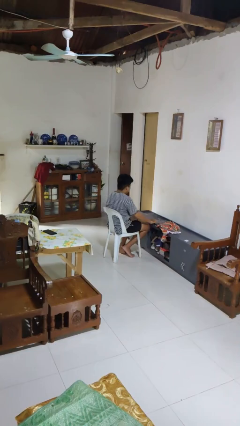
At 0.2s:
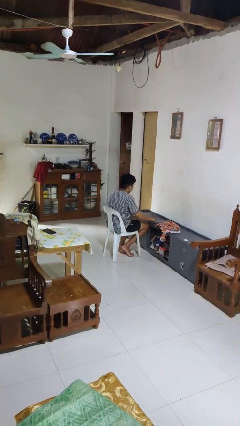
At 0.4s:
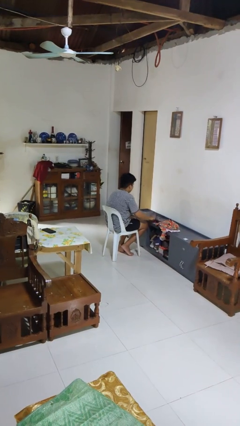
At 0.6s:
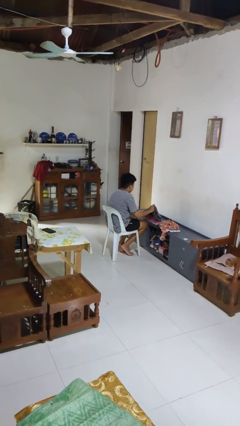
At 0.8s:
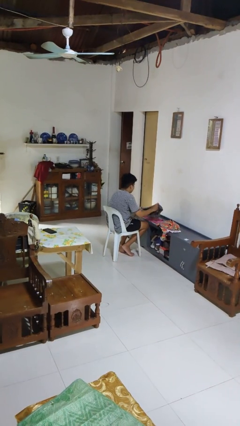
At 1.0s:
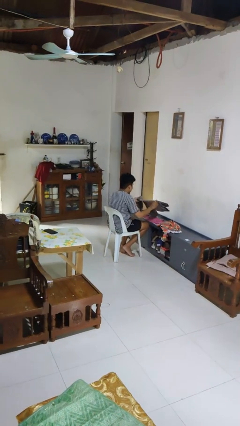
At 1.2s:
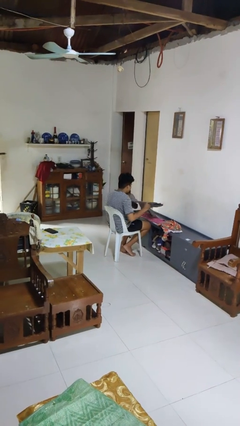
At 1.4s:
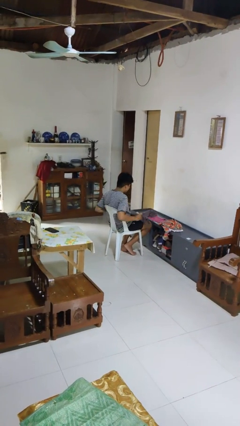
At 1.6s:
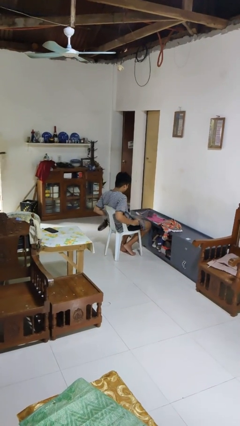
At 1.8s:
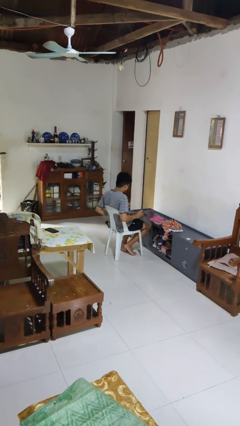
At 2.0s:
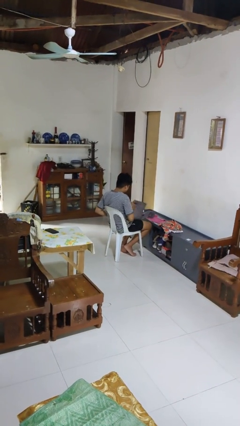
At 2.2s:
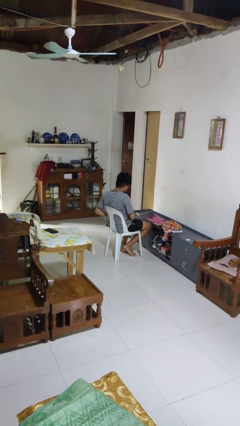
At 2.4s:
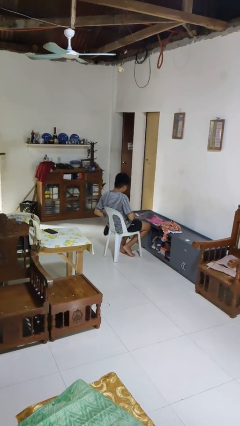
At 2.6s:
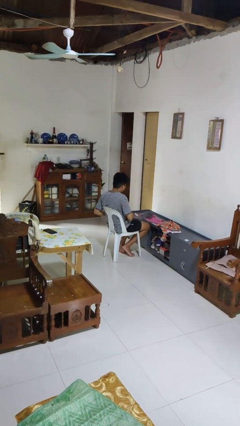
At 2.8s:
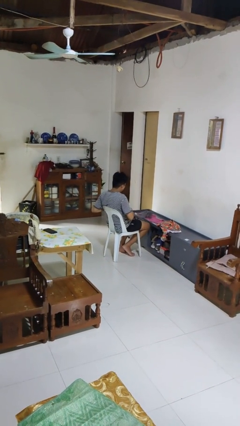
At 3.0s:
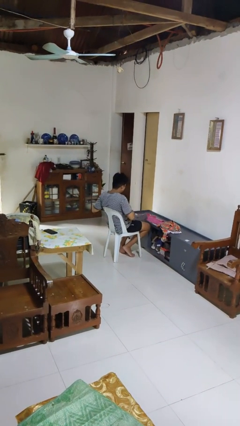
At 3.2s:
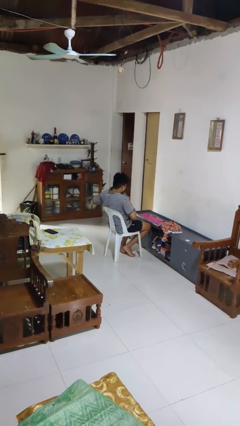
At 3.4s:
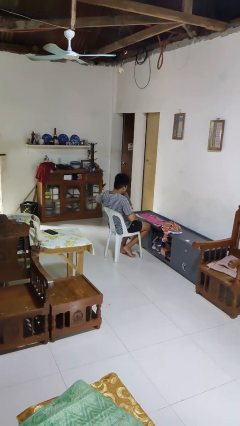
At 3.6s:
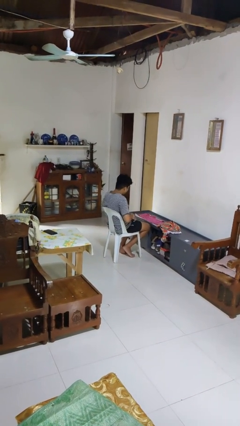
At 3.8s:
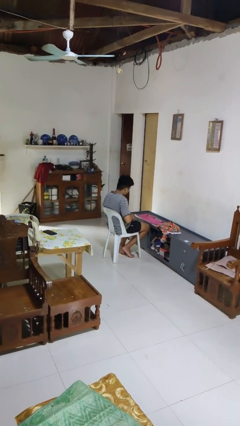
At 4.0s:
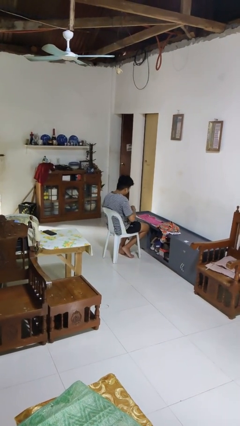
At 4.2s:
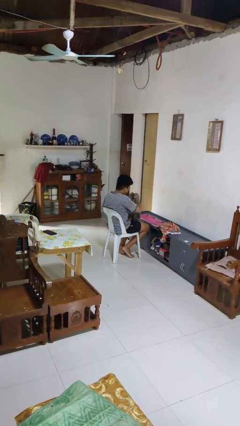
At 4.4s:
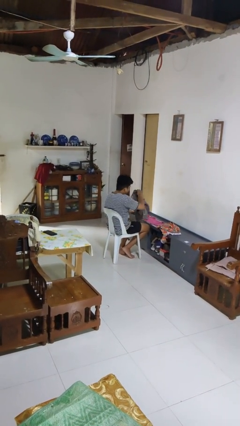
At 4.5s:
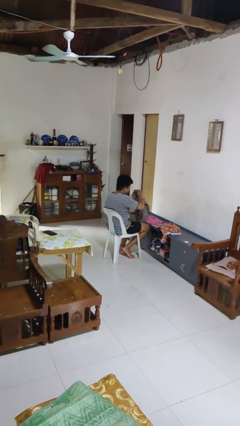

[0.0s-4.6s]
person folds shirt

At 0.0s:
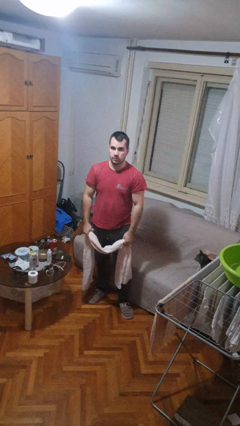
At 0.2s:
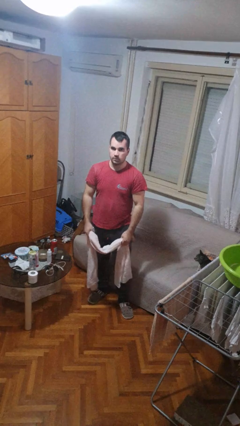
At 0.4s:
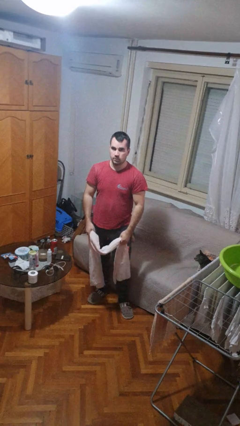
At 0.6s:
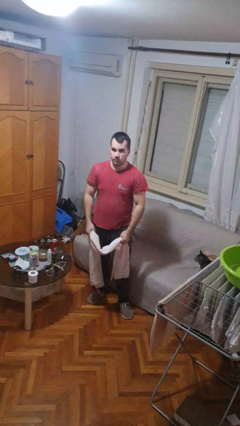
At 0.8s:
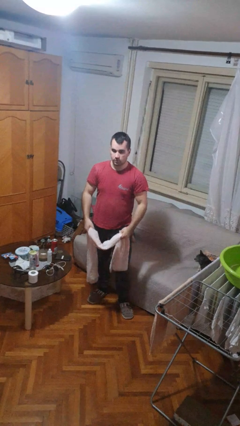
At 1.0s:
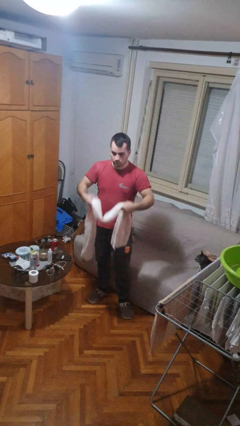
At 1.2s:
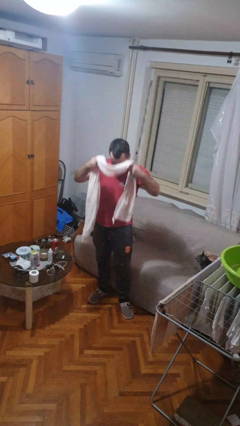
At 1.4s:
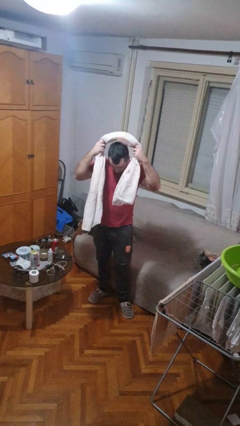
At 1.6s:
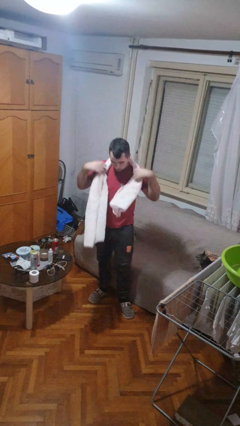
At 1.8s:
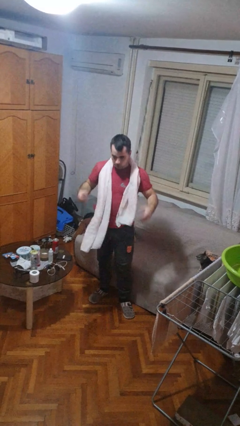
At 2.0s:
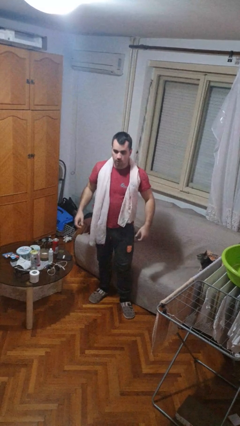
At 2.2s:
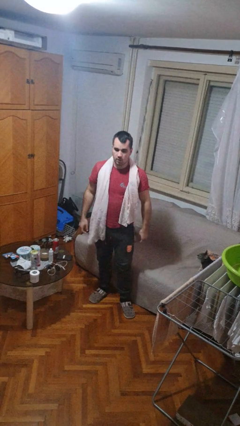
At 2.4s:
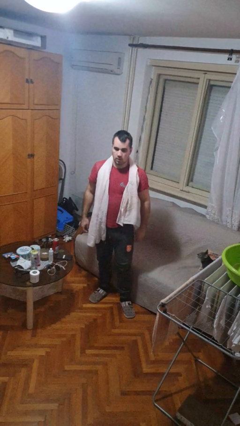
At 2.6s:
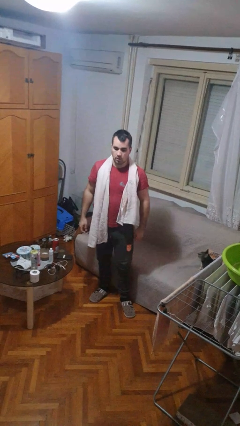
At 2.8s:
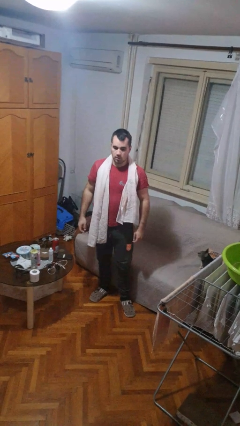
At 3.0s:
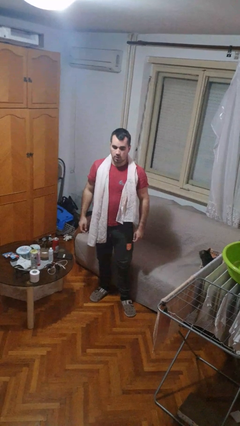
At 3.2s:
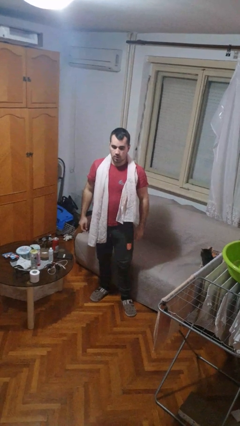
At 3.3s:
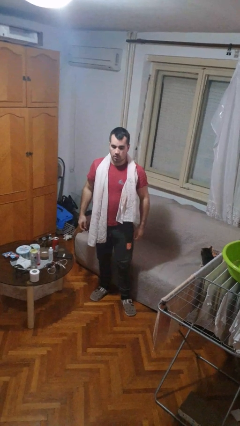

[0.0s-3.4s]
person puts on scarf

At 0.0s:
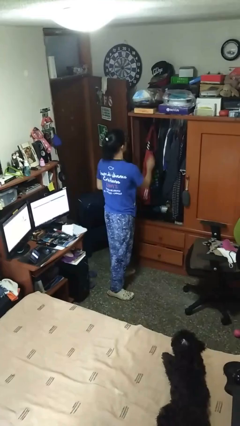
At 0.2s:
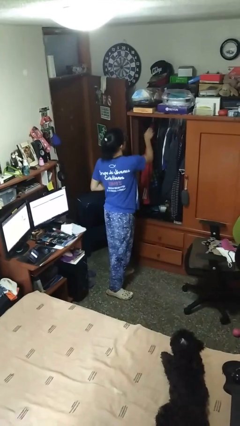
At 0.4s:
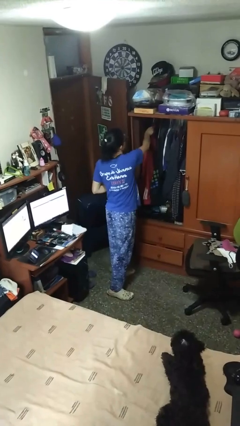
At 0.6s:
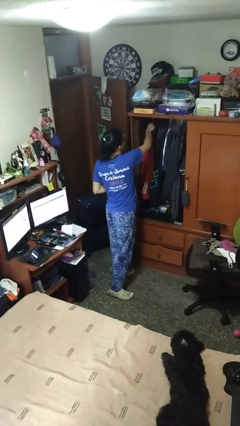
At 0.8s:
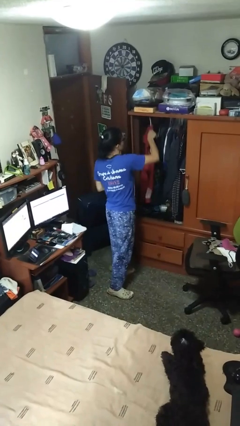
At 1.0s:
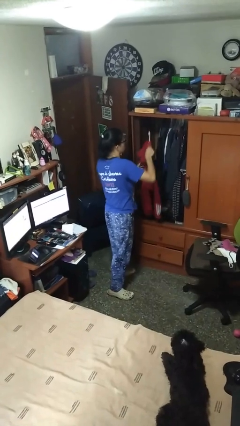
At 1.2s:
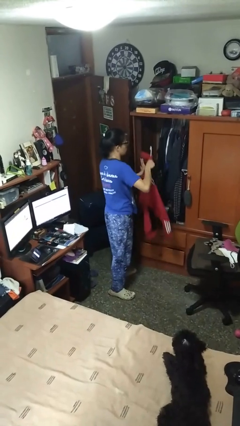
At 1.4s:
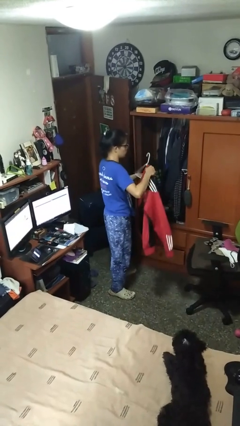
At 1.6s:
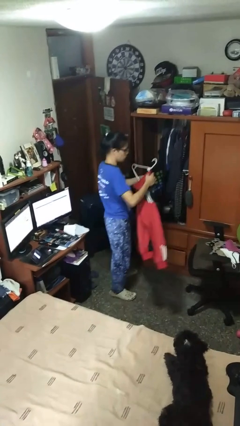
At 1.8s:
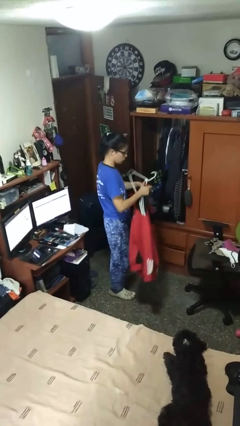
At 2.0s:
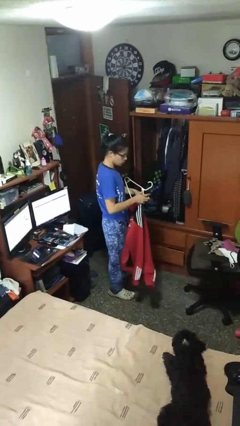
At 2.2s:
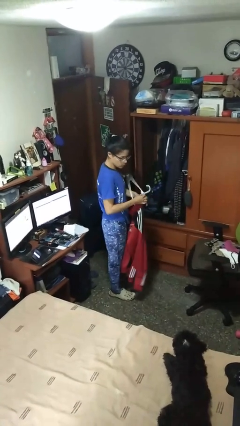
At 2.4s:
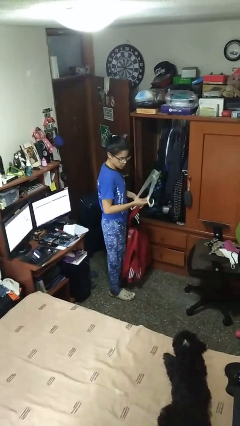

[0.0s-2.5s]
person takes clothes from closet

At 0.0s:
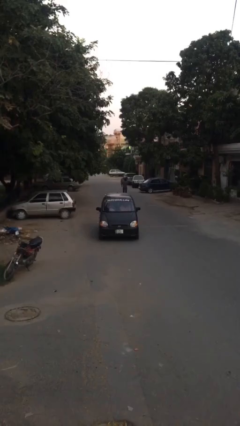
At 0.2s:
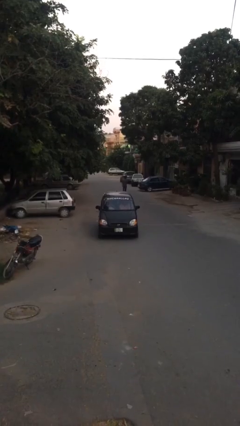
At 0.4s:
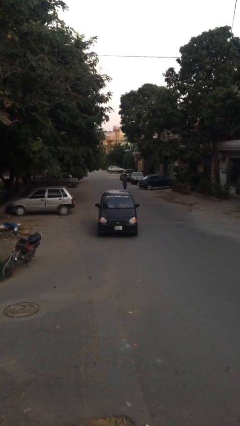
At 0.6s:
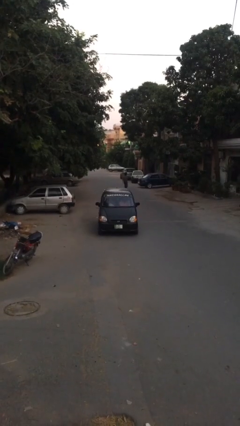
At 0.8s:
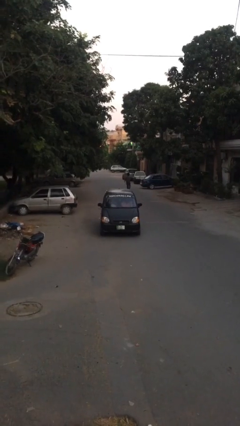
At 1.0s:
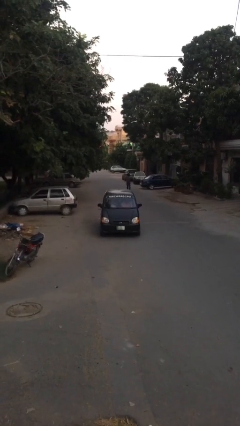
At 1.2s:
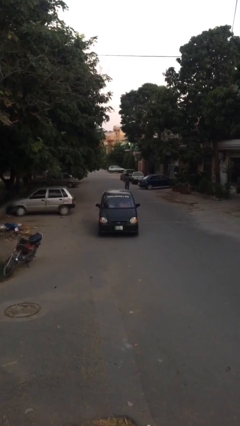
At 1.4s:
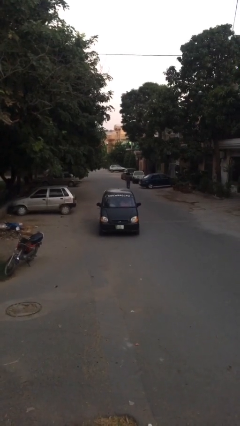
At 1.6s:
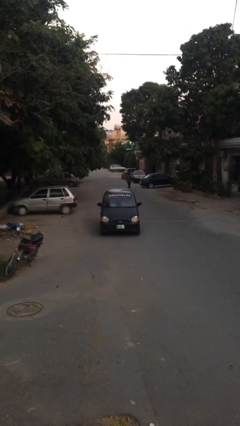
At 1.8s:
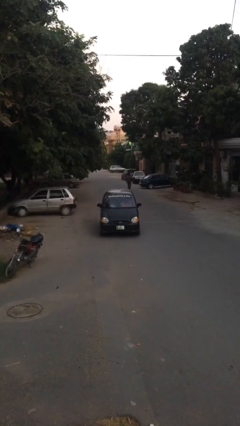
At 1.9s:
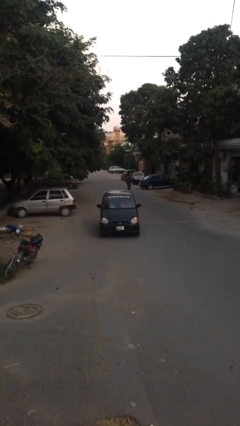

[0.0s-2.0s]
car drops off person

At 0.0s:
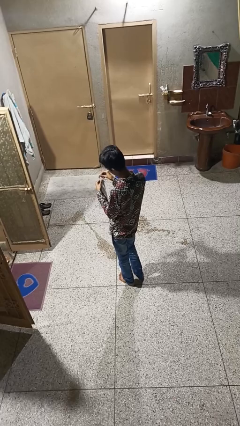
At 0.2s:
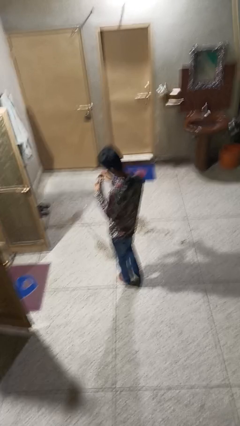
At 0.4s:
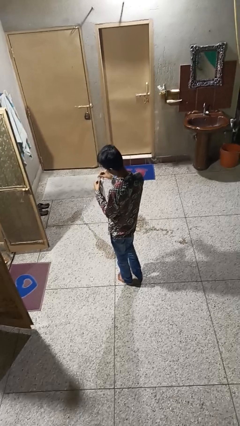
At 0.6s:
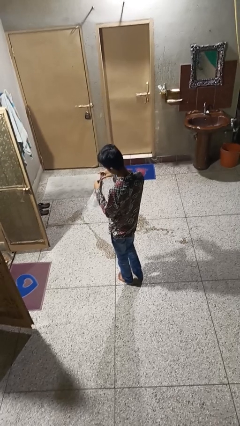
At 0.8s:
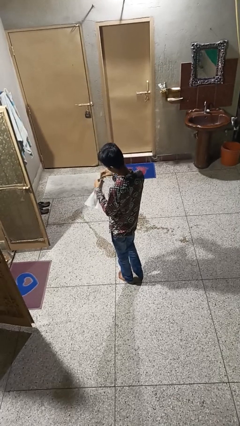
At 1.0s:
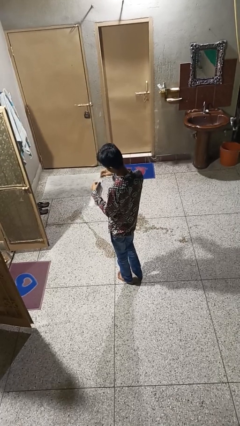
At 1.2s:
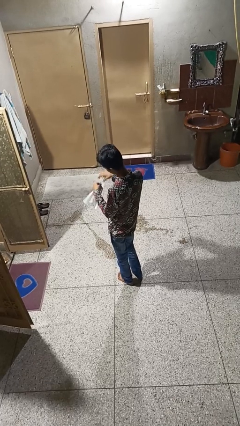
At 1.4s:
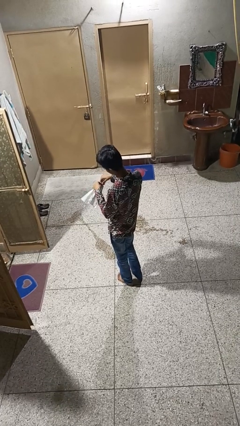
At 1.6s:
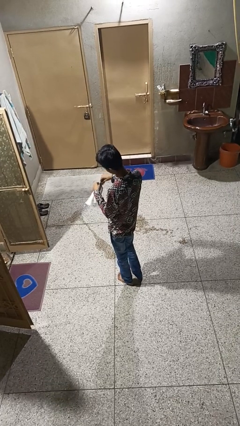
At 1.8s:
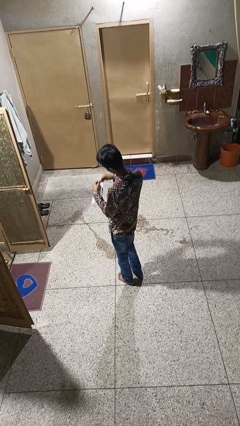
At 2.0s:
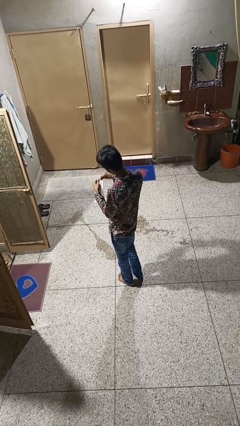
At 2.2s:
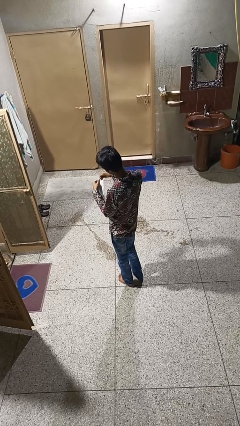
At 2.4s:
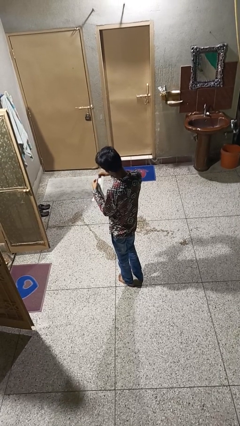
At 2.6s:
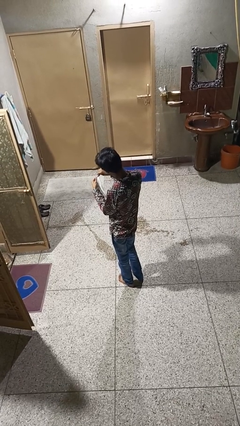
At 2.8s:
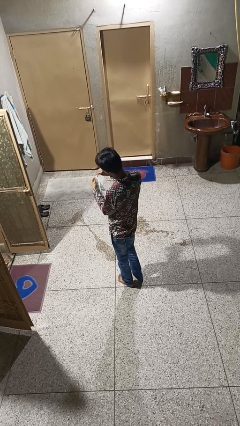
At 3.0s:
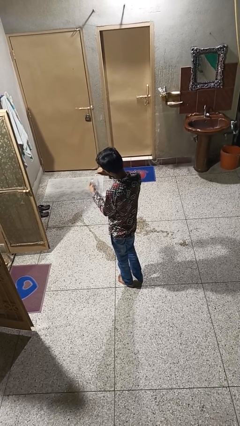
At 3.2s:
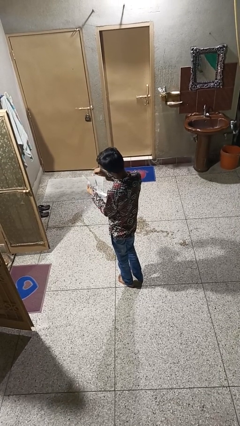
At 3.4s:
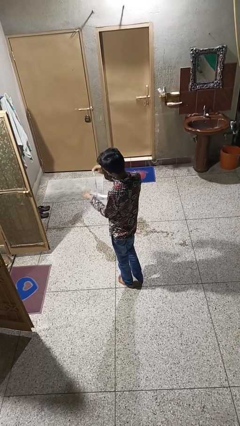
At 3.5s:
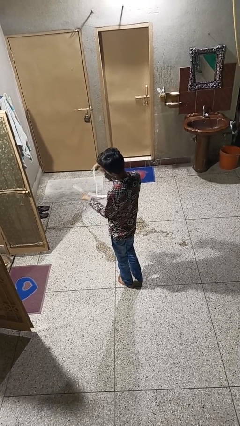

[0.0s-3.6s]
person tears paper

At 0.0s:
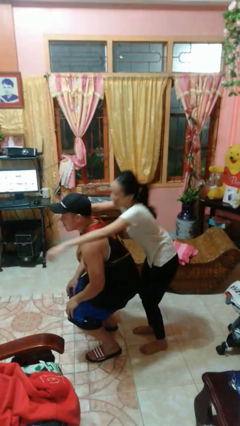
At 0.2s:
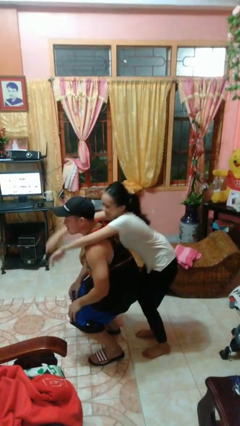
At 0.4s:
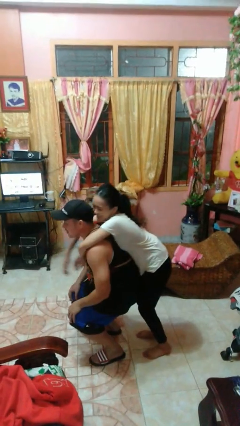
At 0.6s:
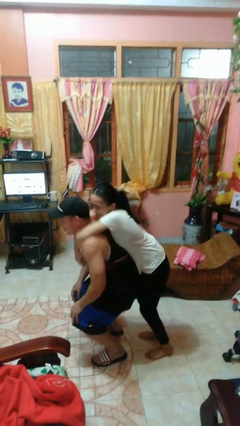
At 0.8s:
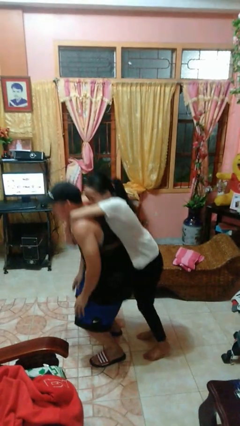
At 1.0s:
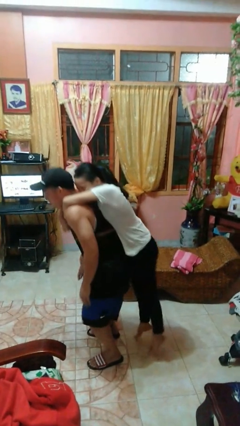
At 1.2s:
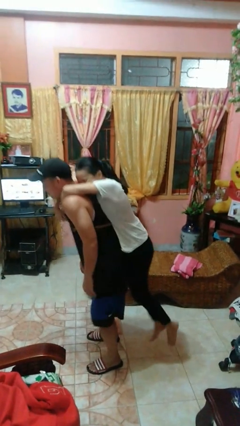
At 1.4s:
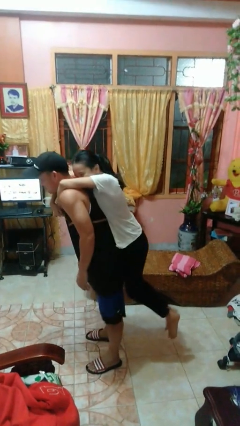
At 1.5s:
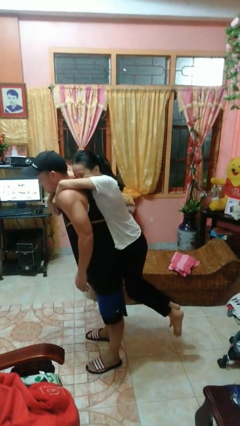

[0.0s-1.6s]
person picks up person
